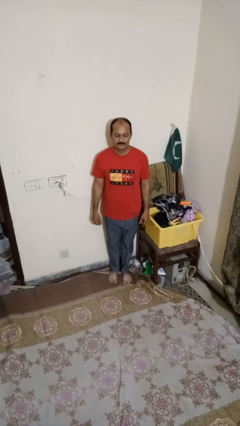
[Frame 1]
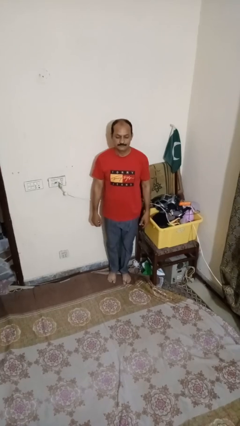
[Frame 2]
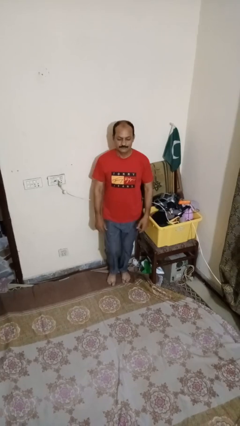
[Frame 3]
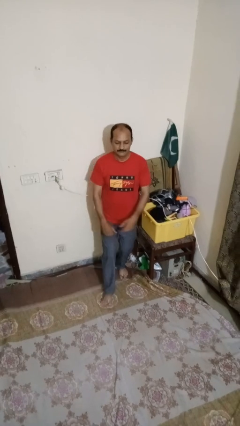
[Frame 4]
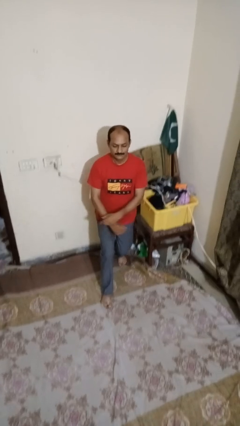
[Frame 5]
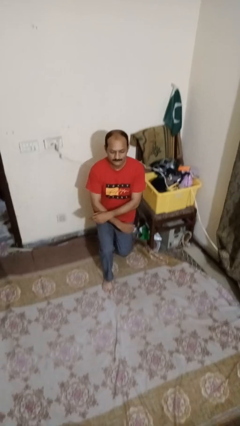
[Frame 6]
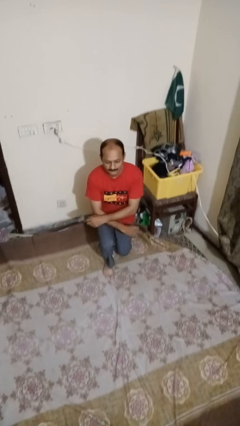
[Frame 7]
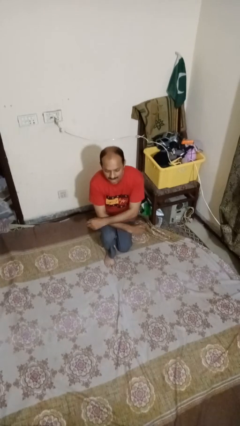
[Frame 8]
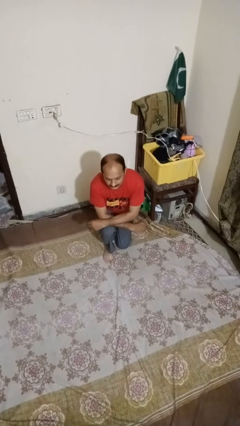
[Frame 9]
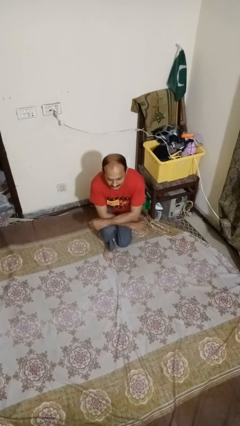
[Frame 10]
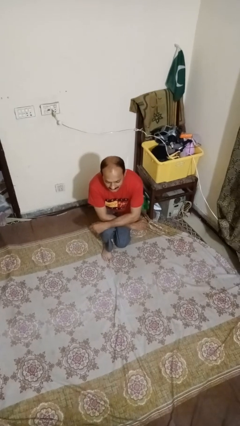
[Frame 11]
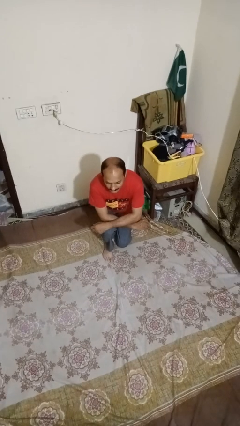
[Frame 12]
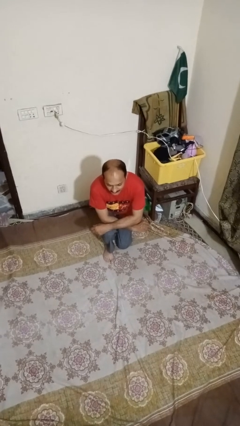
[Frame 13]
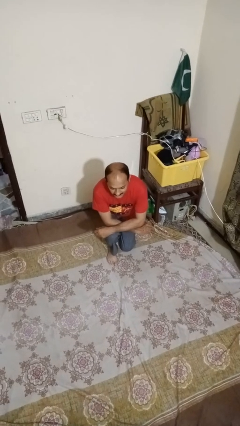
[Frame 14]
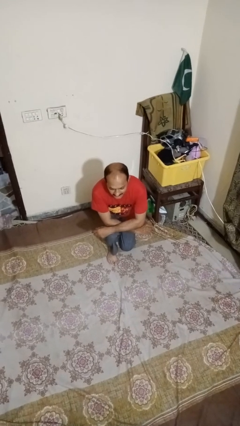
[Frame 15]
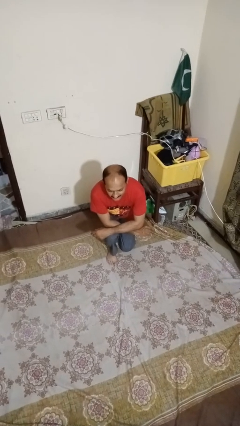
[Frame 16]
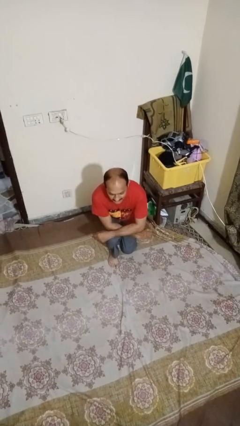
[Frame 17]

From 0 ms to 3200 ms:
person exercises with lunges

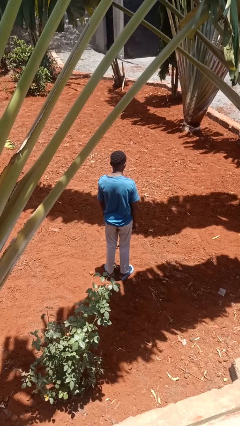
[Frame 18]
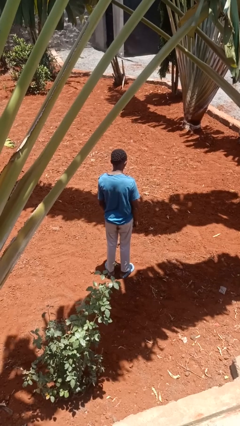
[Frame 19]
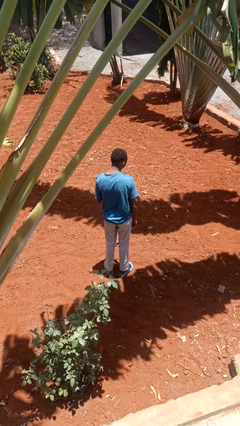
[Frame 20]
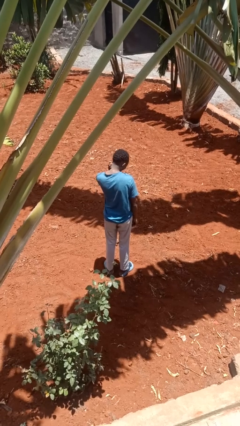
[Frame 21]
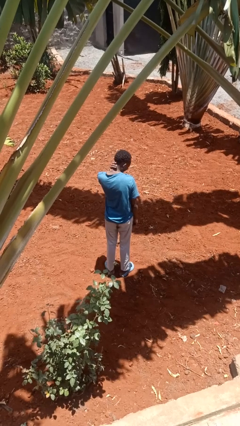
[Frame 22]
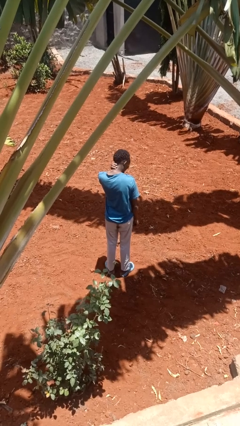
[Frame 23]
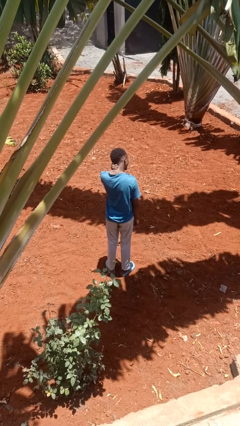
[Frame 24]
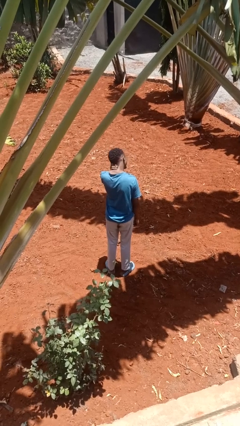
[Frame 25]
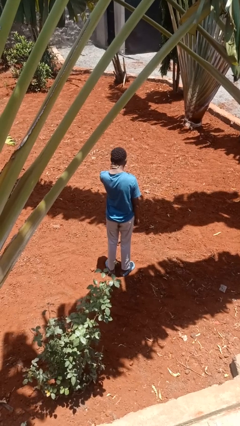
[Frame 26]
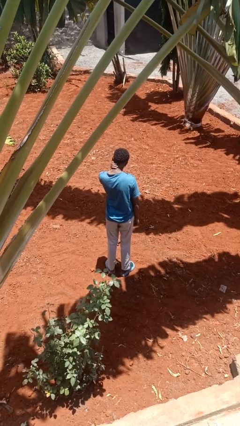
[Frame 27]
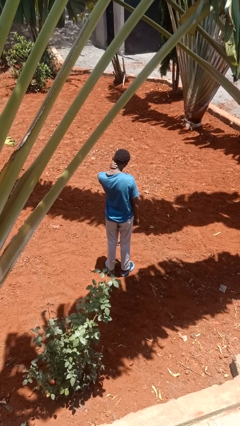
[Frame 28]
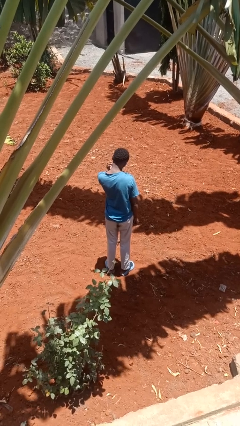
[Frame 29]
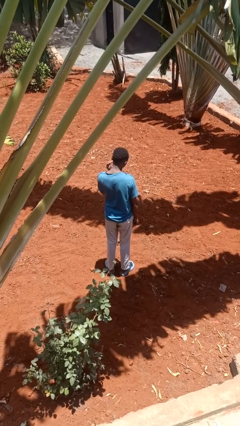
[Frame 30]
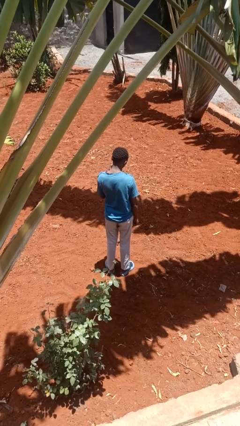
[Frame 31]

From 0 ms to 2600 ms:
person rubs neck

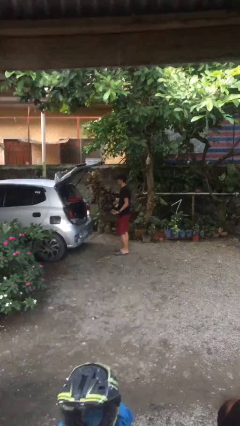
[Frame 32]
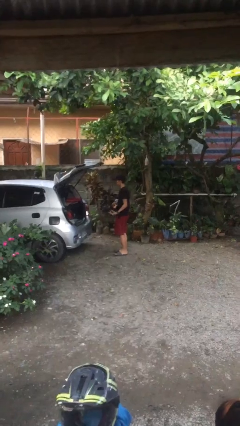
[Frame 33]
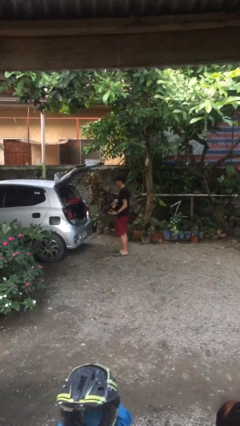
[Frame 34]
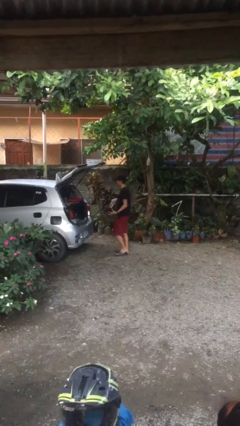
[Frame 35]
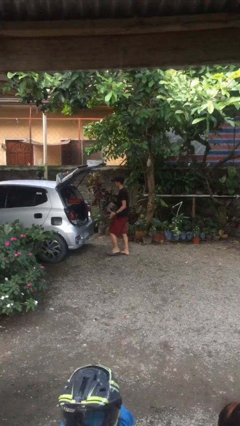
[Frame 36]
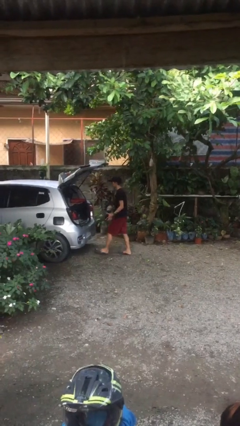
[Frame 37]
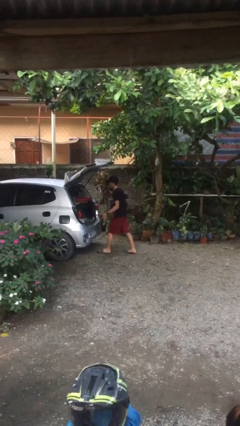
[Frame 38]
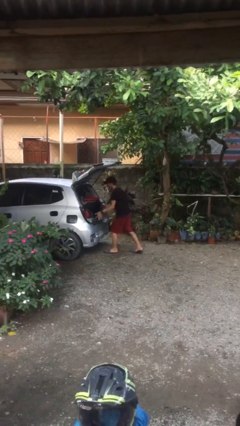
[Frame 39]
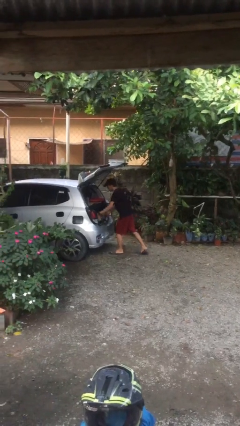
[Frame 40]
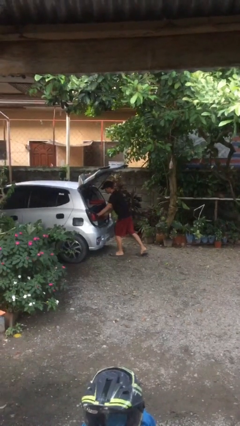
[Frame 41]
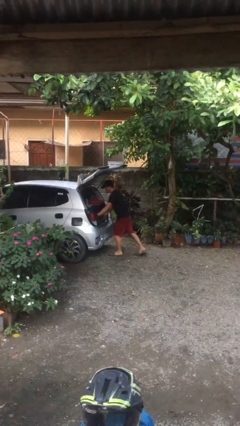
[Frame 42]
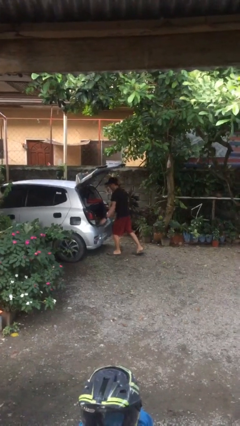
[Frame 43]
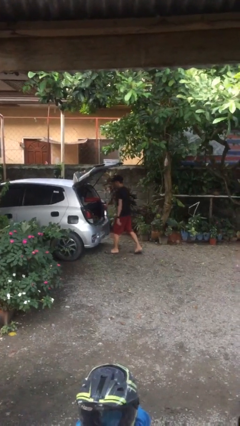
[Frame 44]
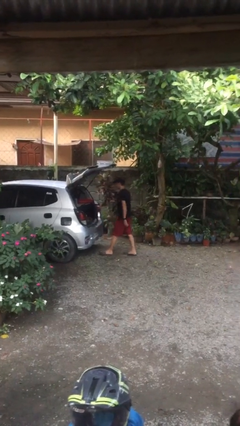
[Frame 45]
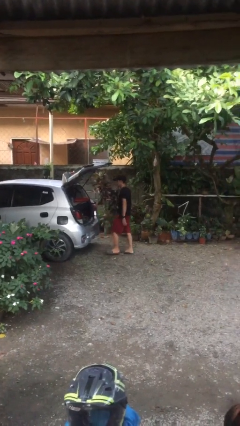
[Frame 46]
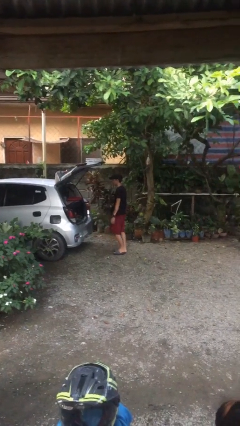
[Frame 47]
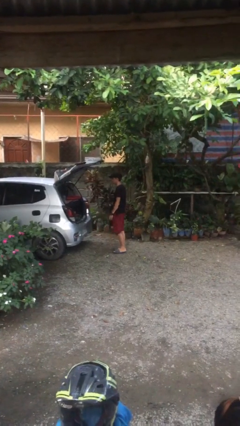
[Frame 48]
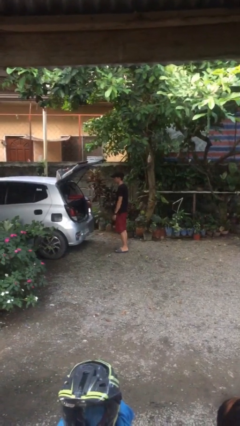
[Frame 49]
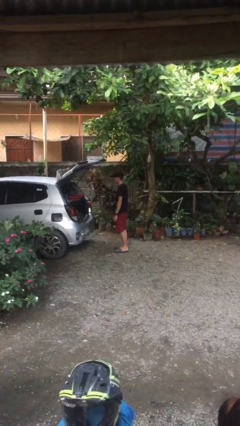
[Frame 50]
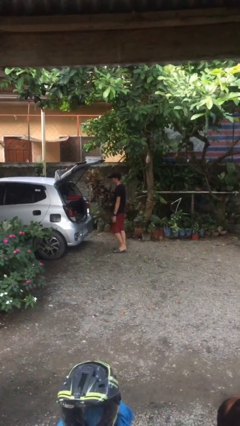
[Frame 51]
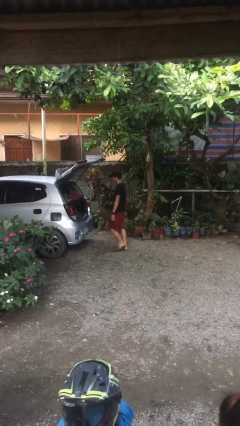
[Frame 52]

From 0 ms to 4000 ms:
person loads car

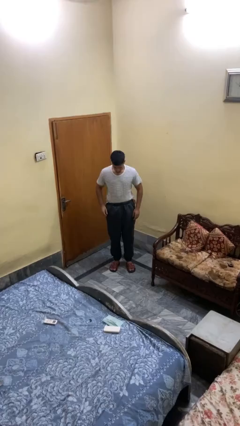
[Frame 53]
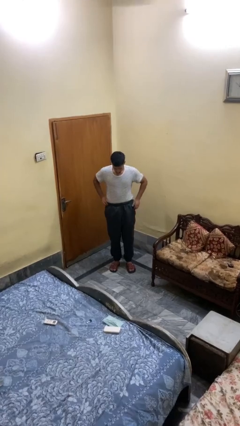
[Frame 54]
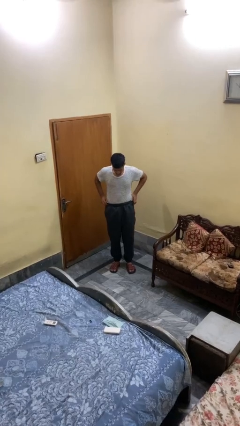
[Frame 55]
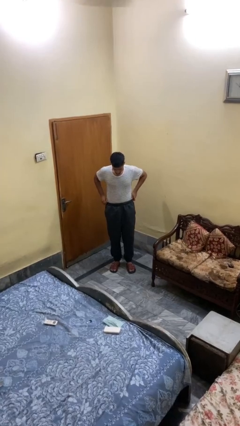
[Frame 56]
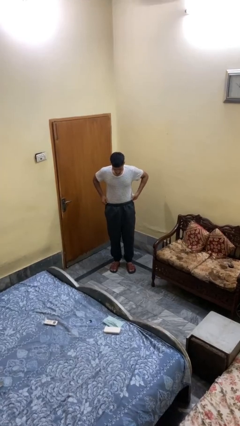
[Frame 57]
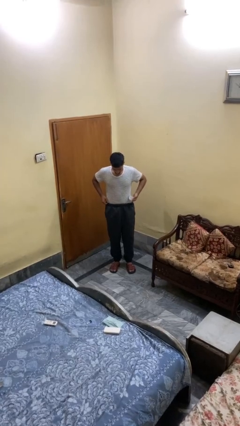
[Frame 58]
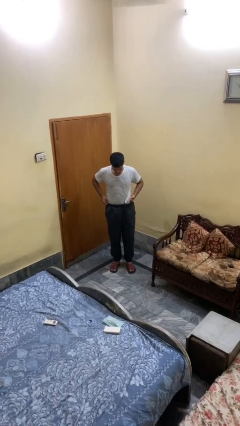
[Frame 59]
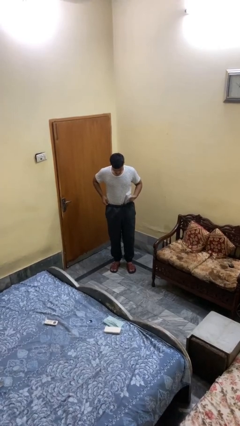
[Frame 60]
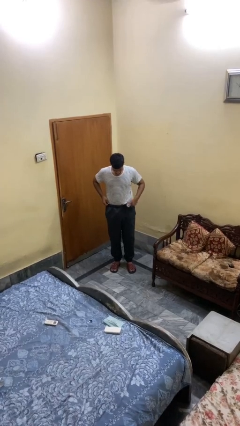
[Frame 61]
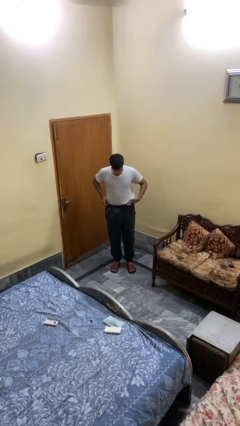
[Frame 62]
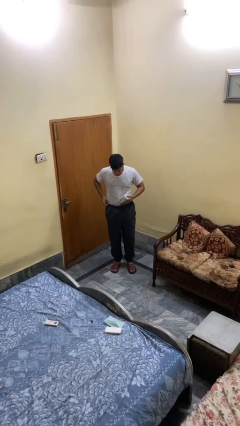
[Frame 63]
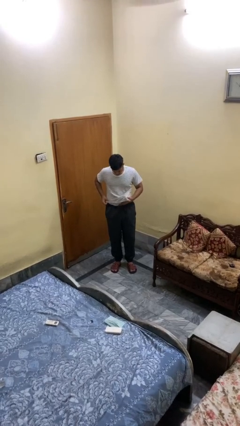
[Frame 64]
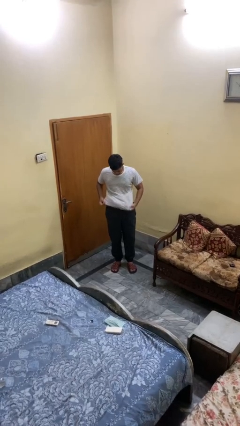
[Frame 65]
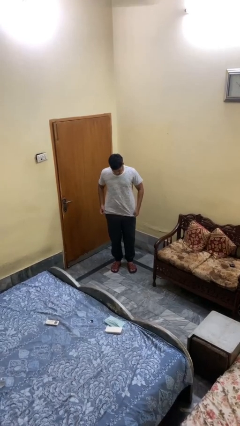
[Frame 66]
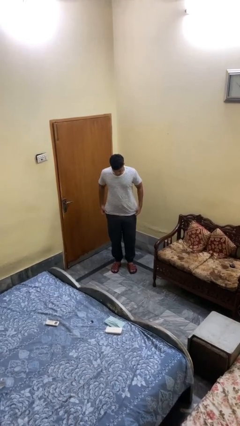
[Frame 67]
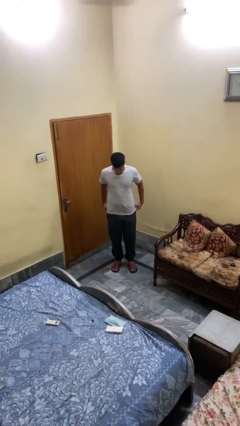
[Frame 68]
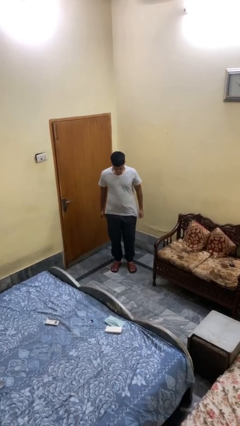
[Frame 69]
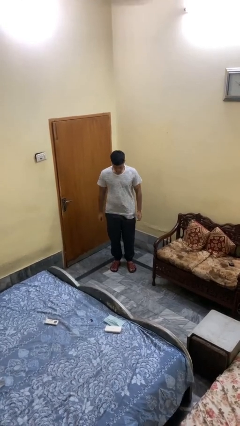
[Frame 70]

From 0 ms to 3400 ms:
person untucks shirt

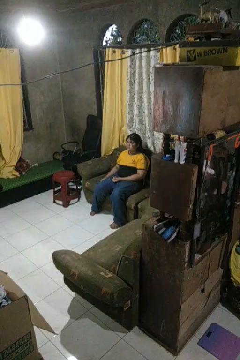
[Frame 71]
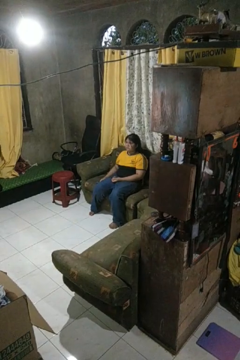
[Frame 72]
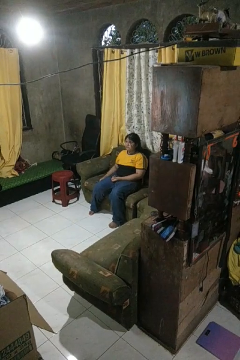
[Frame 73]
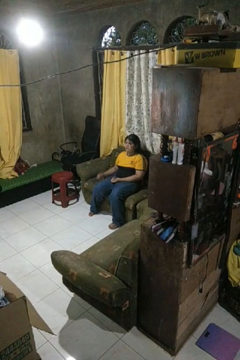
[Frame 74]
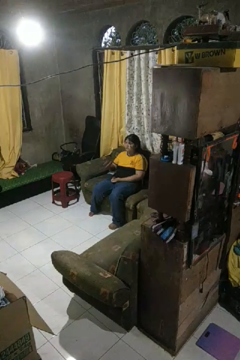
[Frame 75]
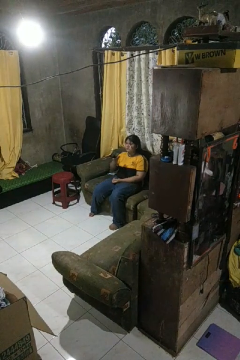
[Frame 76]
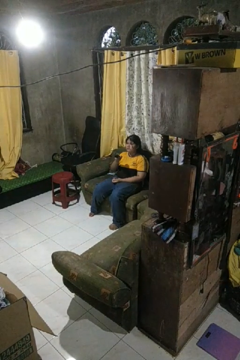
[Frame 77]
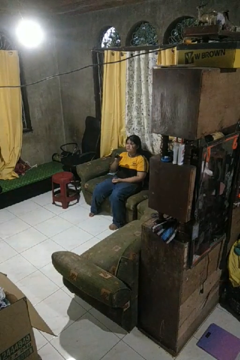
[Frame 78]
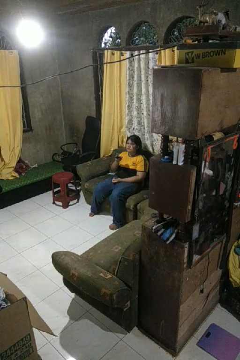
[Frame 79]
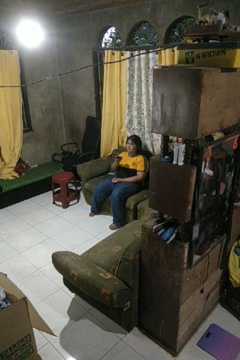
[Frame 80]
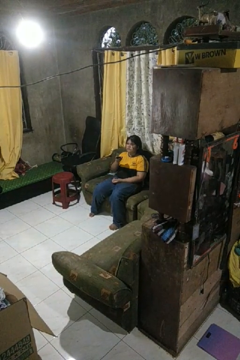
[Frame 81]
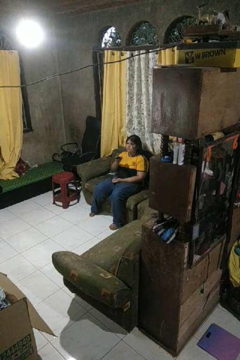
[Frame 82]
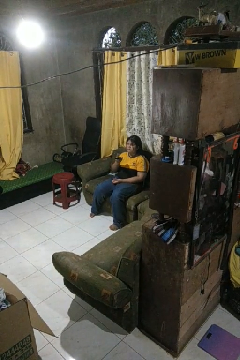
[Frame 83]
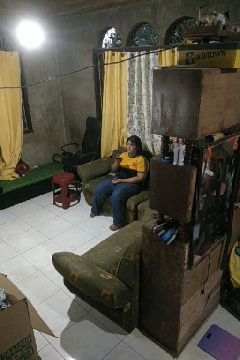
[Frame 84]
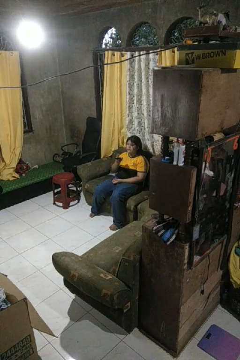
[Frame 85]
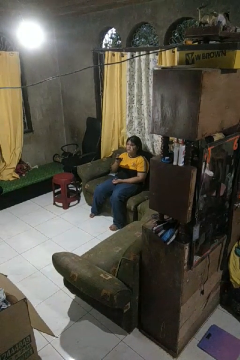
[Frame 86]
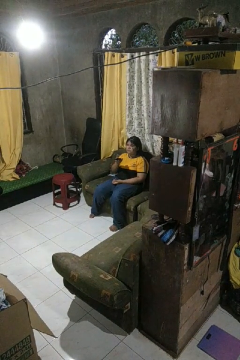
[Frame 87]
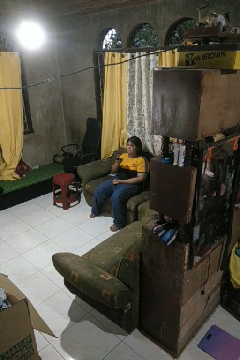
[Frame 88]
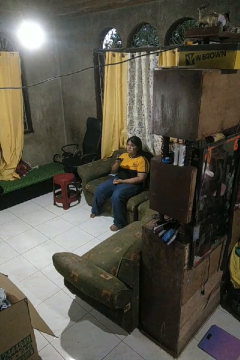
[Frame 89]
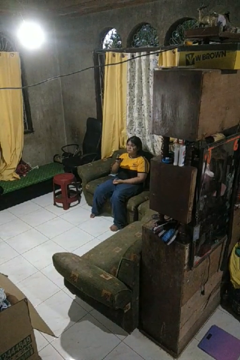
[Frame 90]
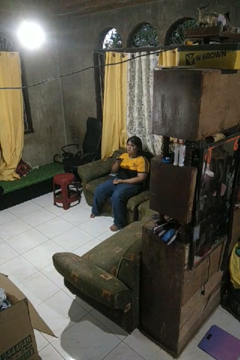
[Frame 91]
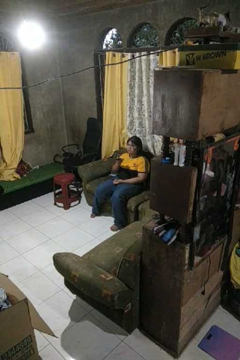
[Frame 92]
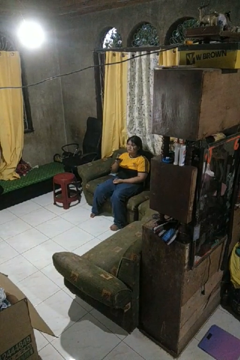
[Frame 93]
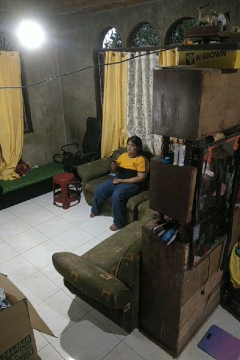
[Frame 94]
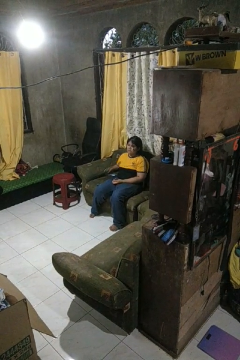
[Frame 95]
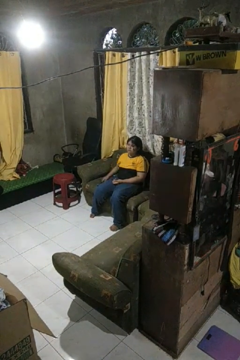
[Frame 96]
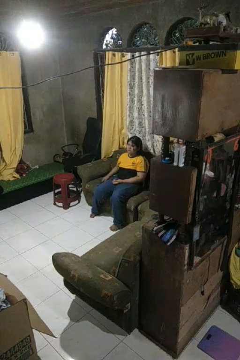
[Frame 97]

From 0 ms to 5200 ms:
person uses television remote

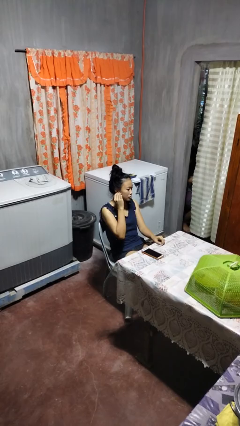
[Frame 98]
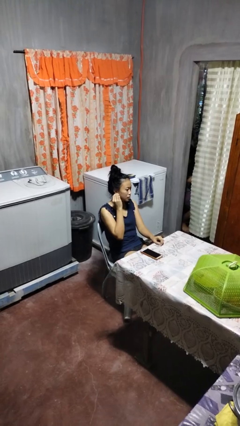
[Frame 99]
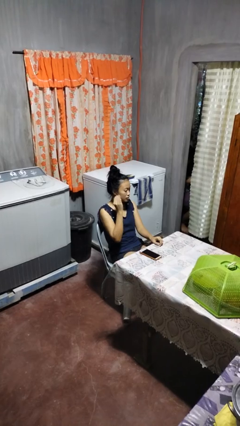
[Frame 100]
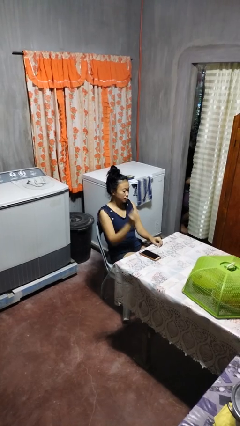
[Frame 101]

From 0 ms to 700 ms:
person takes off earrings
